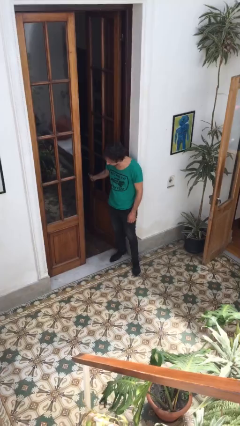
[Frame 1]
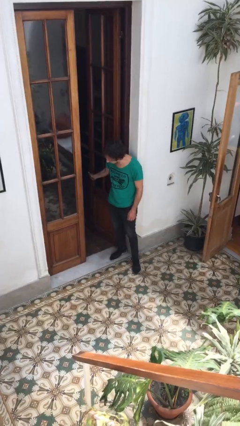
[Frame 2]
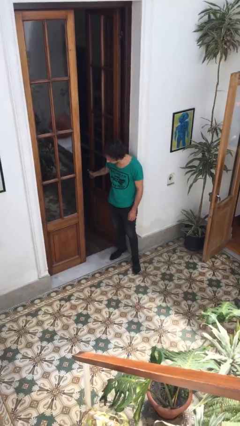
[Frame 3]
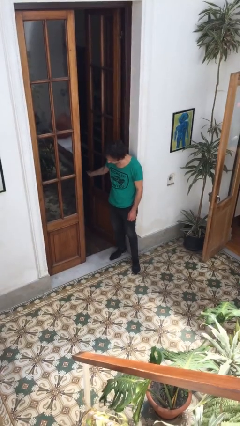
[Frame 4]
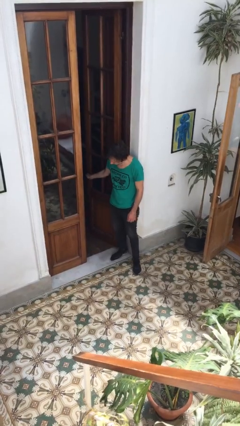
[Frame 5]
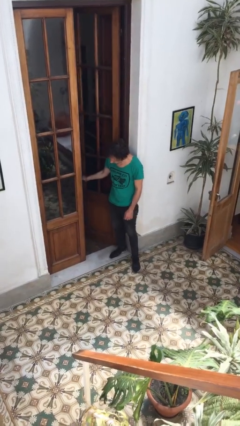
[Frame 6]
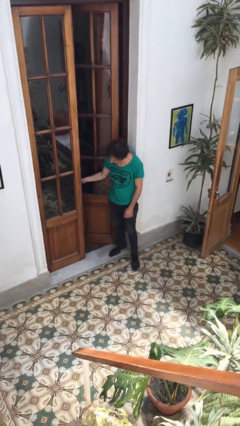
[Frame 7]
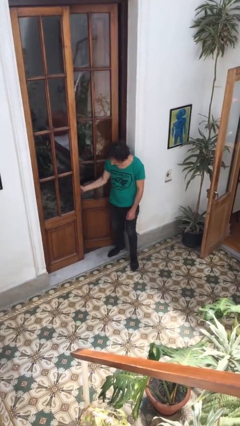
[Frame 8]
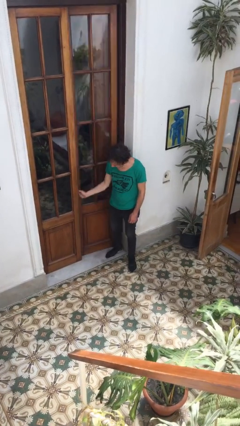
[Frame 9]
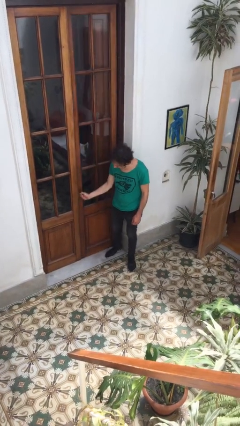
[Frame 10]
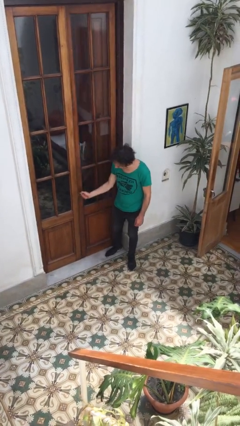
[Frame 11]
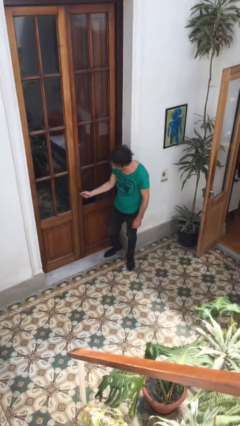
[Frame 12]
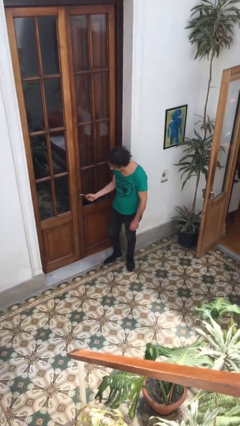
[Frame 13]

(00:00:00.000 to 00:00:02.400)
person closes facility door

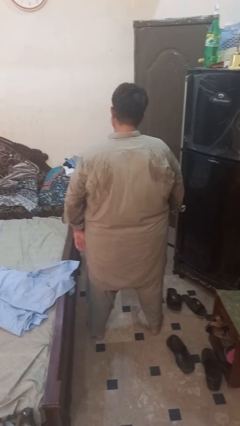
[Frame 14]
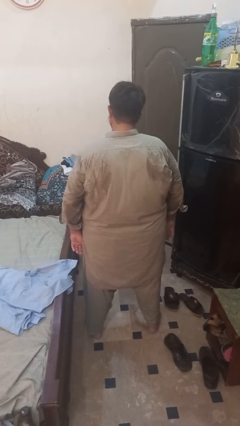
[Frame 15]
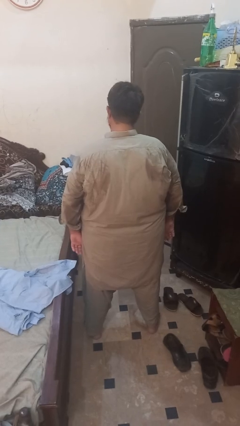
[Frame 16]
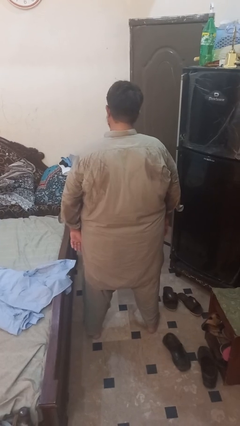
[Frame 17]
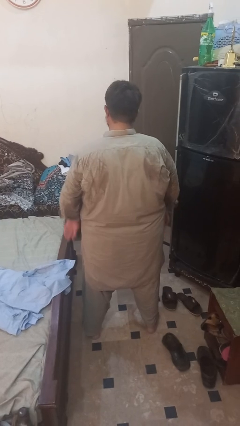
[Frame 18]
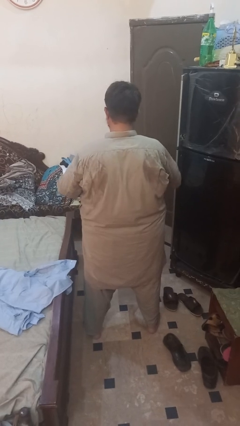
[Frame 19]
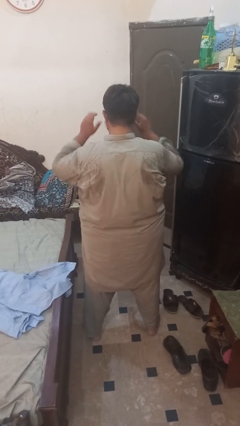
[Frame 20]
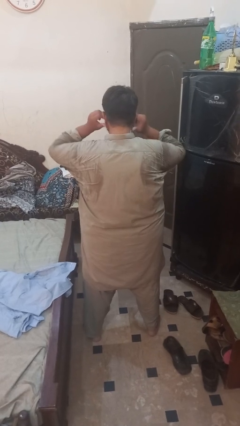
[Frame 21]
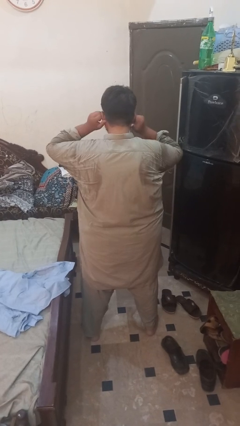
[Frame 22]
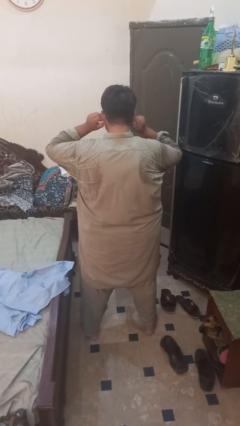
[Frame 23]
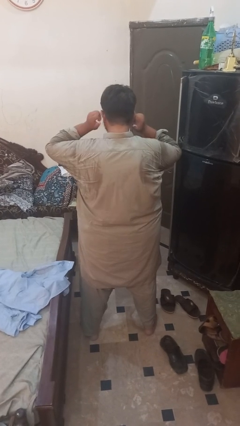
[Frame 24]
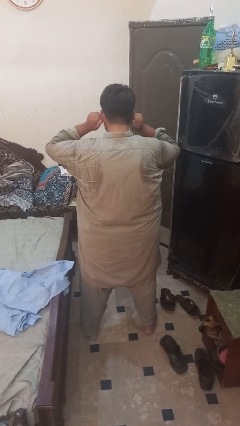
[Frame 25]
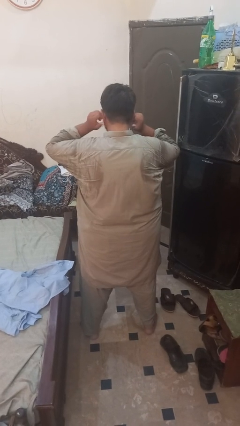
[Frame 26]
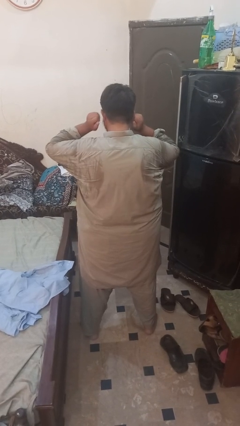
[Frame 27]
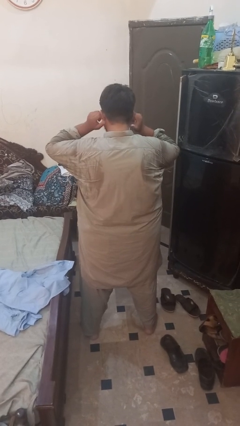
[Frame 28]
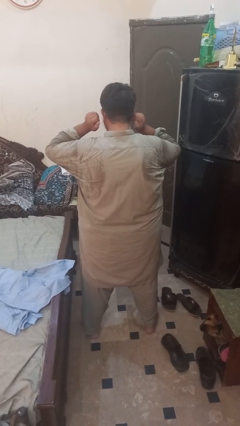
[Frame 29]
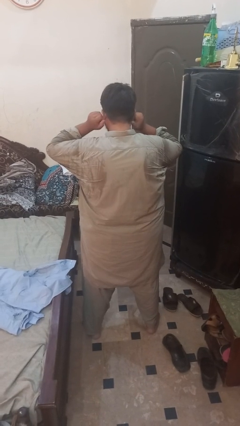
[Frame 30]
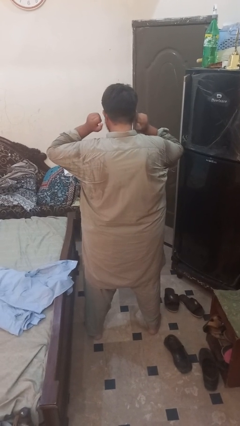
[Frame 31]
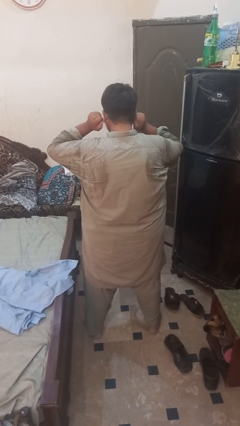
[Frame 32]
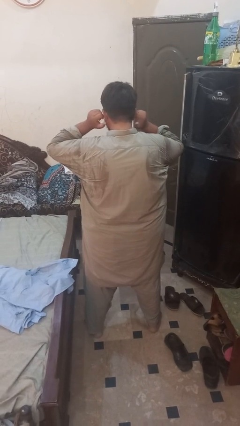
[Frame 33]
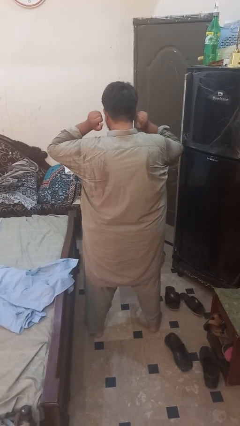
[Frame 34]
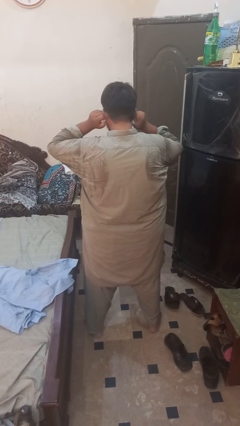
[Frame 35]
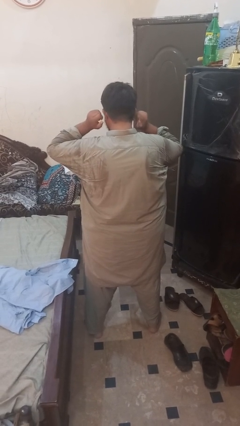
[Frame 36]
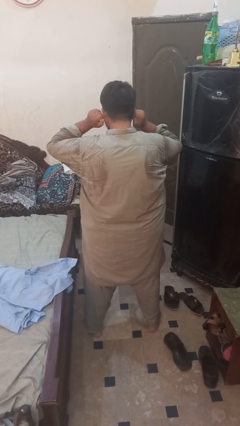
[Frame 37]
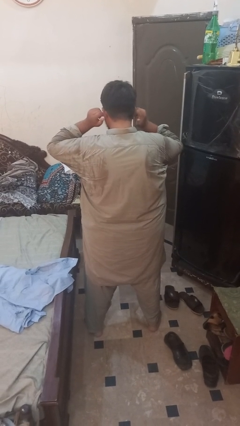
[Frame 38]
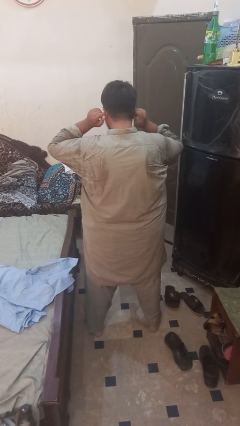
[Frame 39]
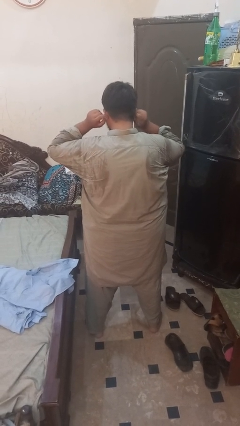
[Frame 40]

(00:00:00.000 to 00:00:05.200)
person touches earlobe

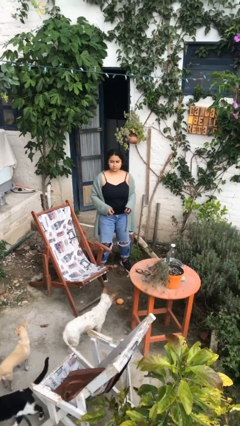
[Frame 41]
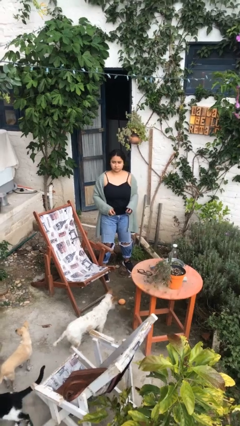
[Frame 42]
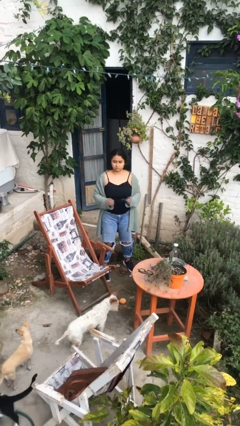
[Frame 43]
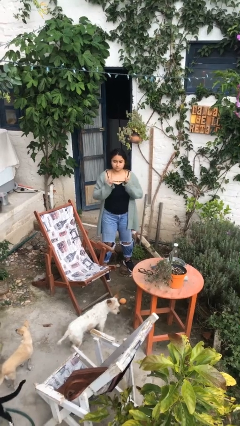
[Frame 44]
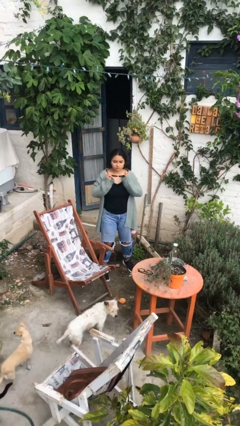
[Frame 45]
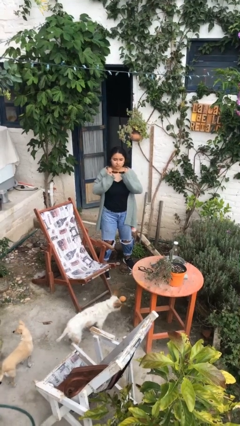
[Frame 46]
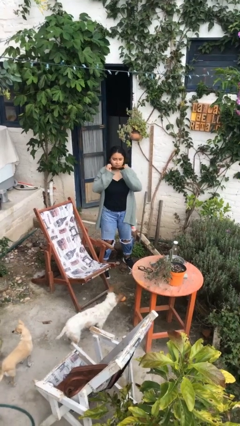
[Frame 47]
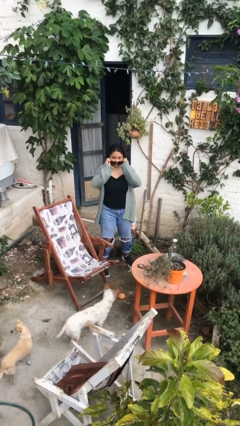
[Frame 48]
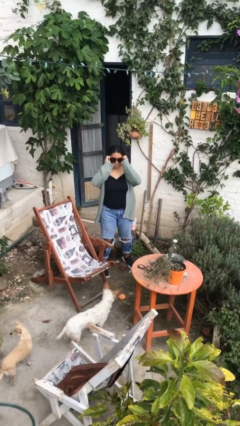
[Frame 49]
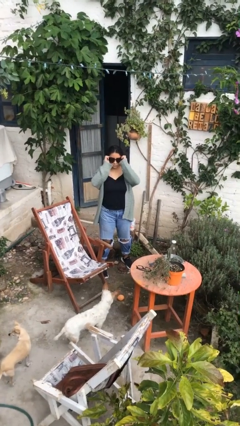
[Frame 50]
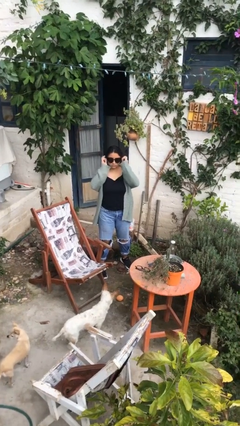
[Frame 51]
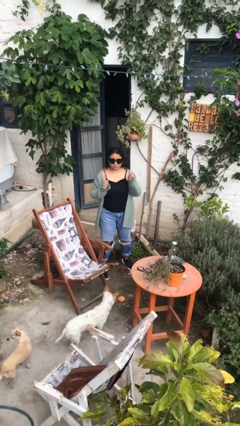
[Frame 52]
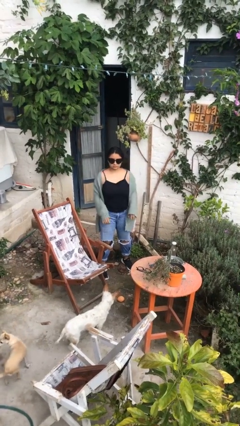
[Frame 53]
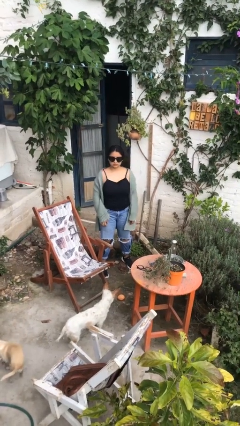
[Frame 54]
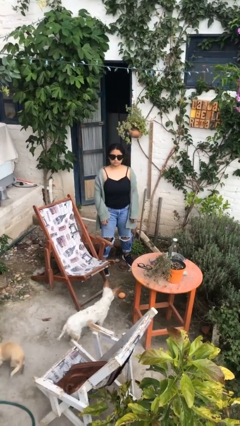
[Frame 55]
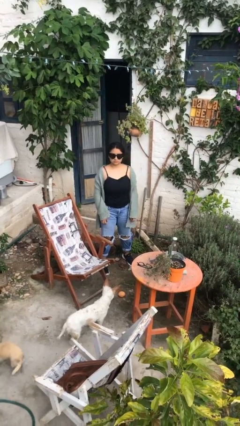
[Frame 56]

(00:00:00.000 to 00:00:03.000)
person puts on sunglasses

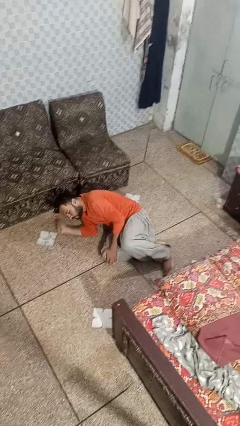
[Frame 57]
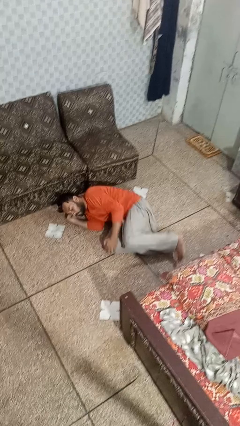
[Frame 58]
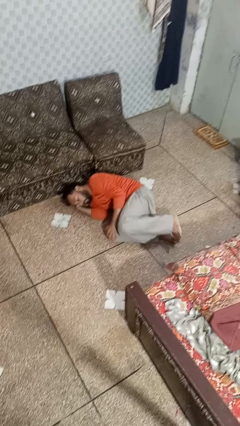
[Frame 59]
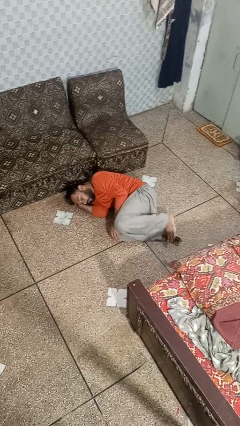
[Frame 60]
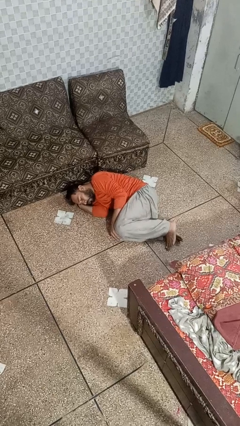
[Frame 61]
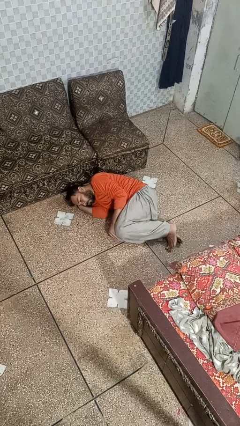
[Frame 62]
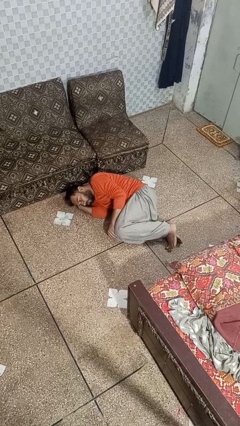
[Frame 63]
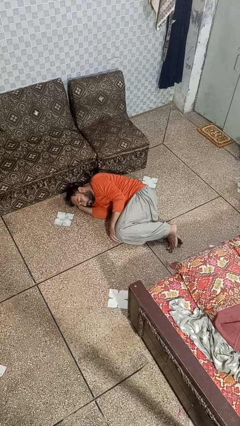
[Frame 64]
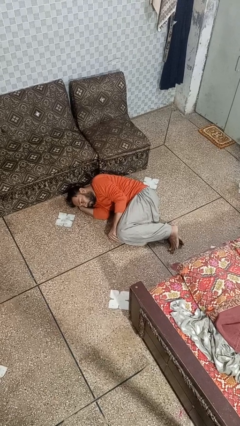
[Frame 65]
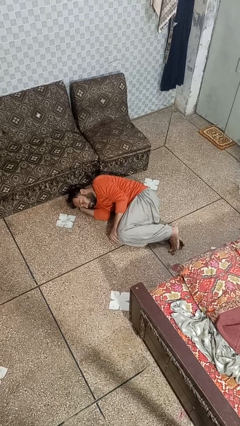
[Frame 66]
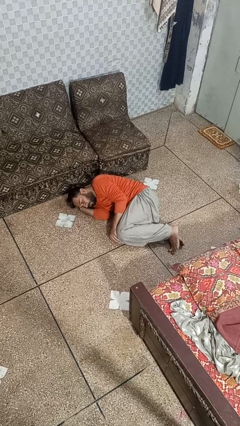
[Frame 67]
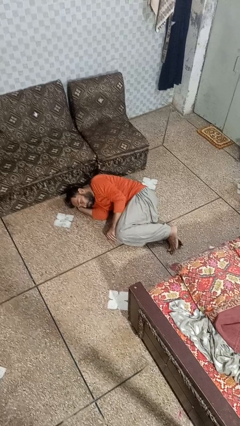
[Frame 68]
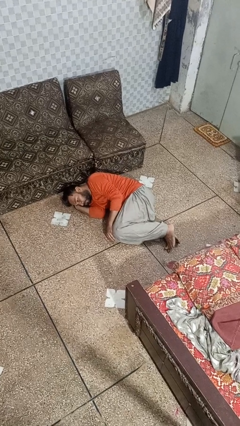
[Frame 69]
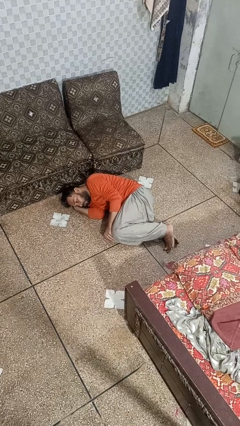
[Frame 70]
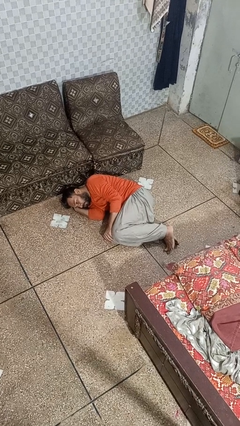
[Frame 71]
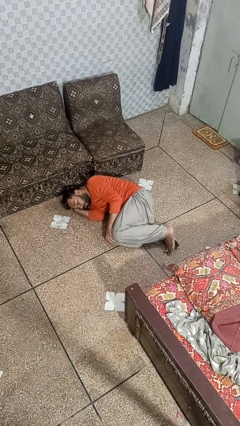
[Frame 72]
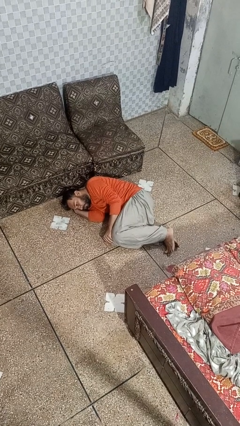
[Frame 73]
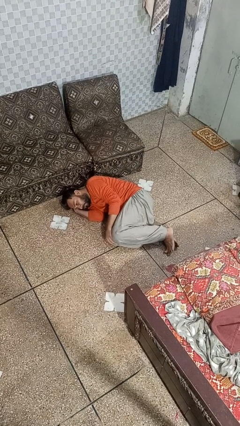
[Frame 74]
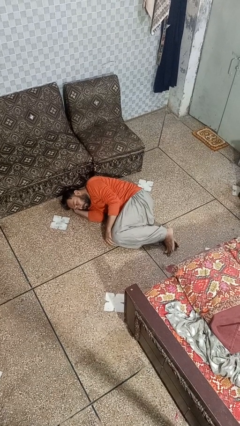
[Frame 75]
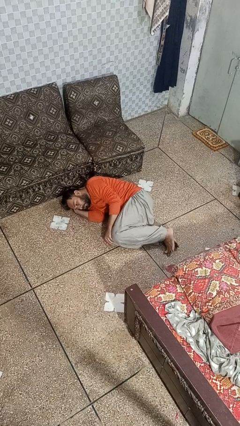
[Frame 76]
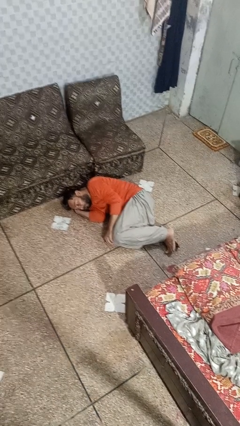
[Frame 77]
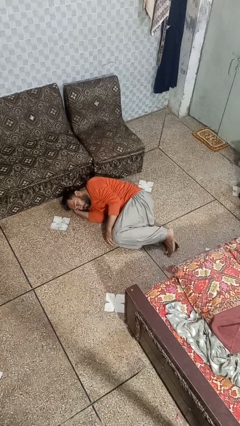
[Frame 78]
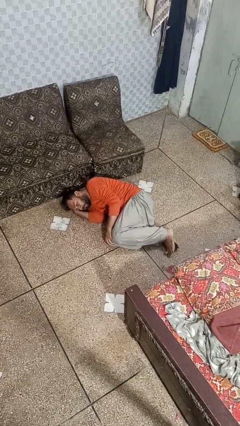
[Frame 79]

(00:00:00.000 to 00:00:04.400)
person lies down on floor

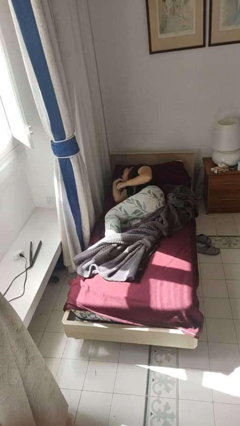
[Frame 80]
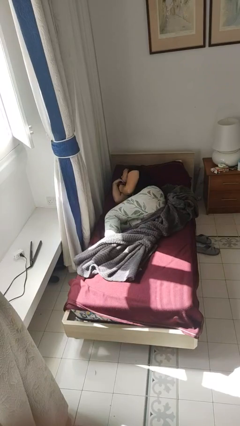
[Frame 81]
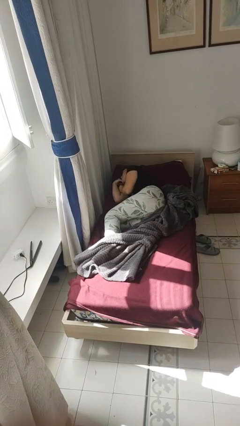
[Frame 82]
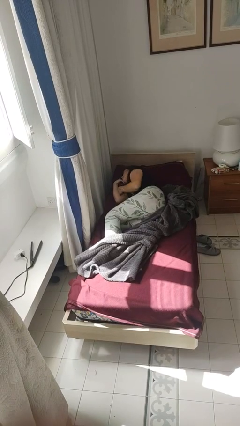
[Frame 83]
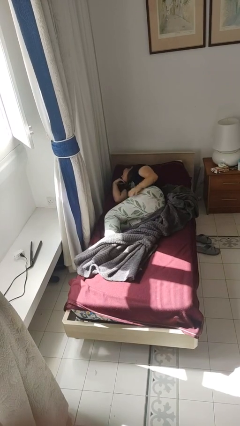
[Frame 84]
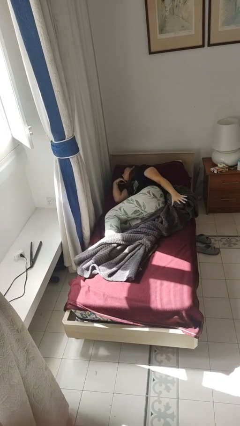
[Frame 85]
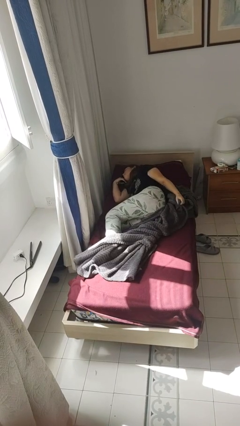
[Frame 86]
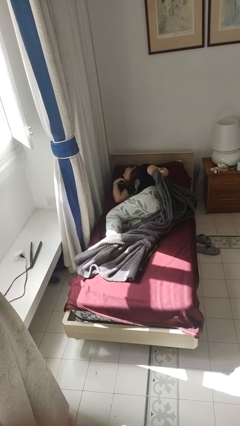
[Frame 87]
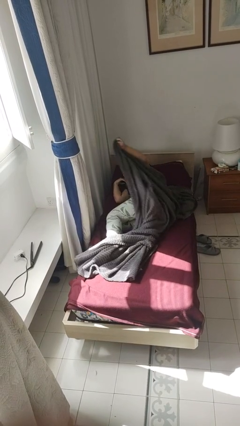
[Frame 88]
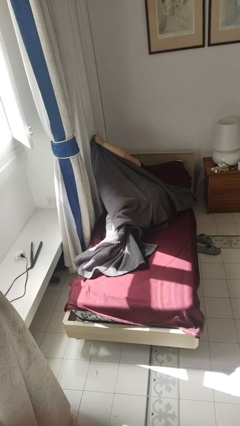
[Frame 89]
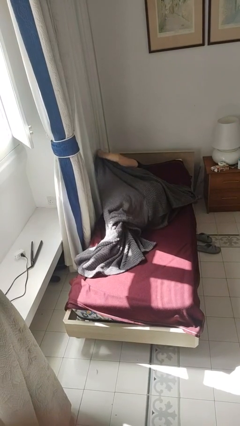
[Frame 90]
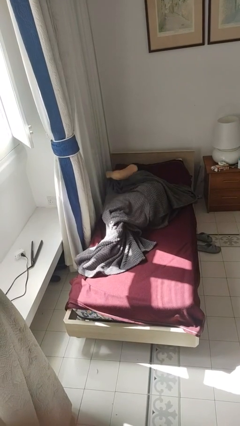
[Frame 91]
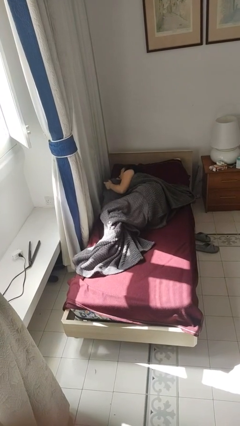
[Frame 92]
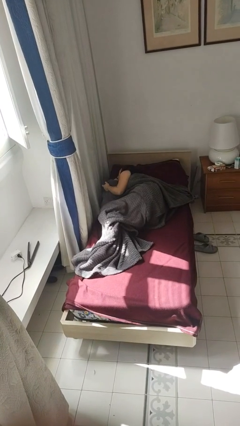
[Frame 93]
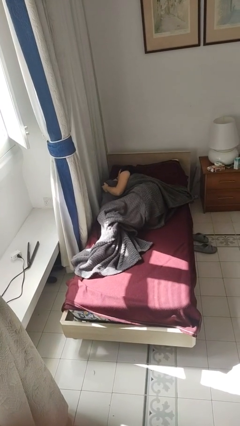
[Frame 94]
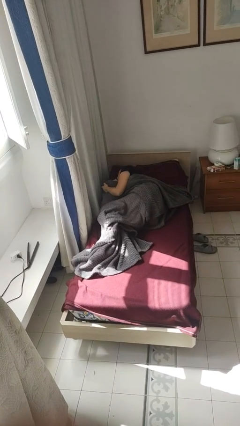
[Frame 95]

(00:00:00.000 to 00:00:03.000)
person covers with bedsheets
